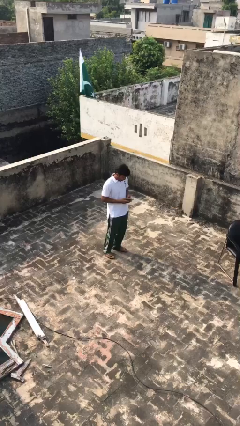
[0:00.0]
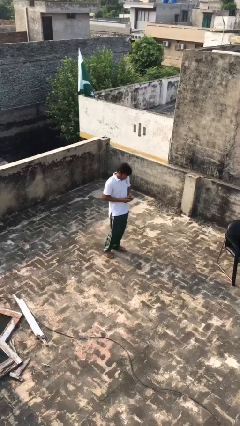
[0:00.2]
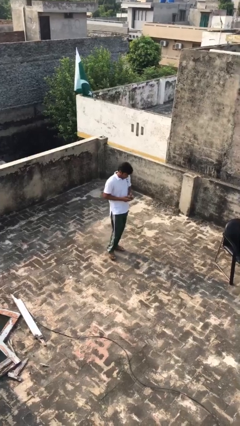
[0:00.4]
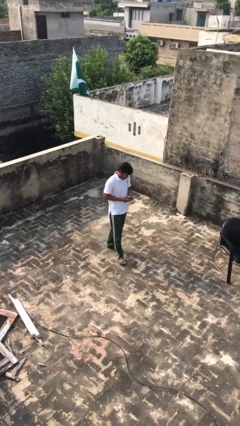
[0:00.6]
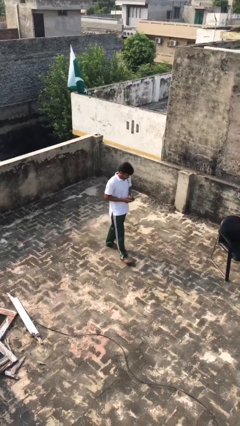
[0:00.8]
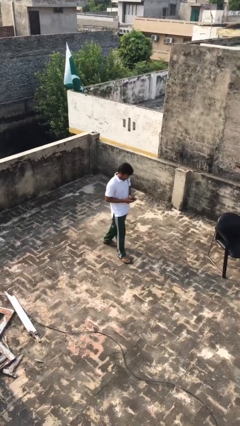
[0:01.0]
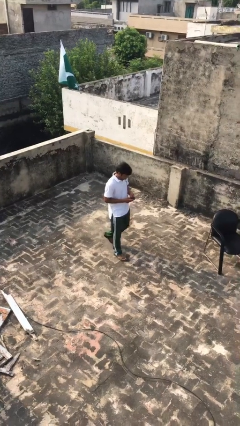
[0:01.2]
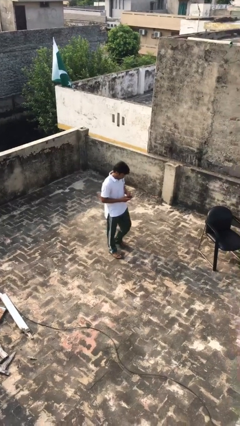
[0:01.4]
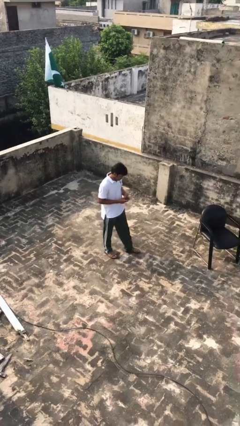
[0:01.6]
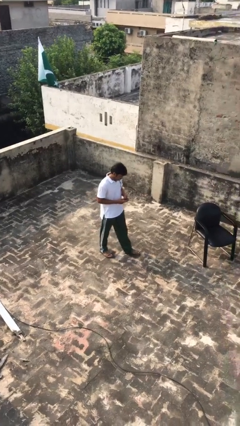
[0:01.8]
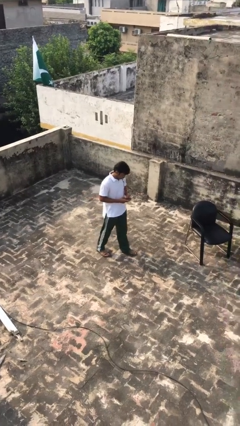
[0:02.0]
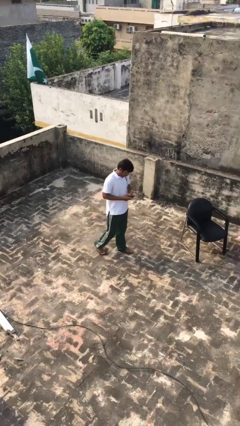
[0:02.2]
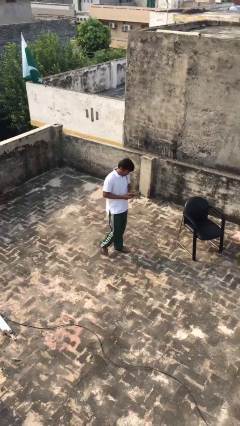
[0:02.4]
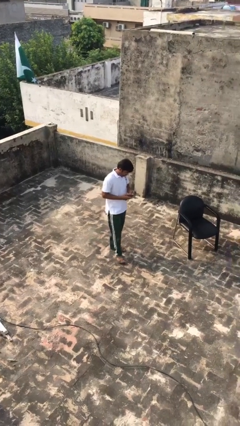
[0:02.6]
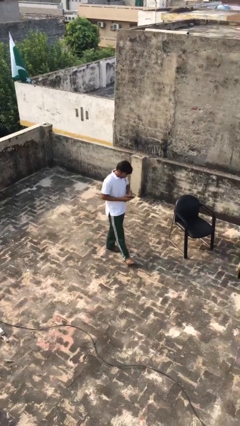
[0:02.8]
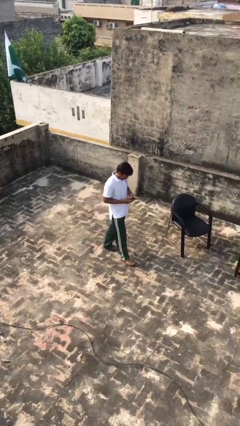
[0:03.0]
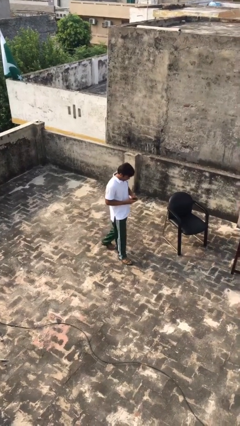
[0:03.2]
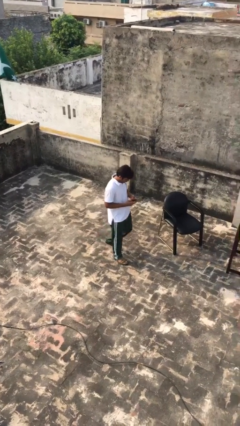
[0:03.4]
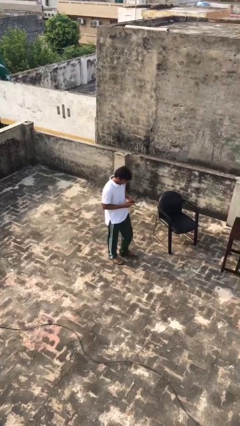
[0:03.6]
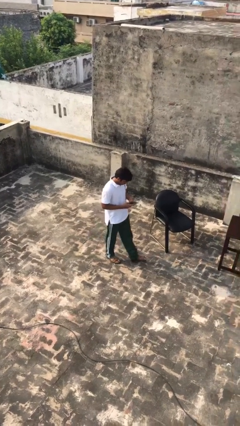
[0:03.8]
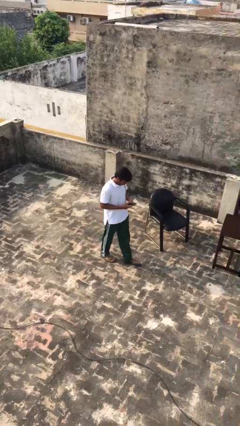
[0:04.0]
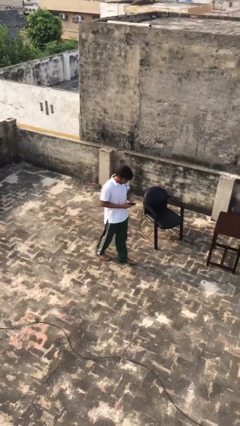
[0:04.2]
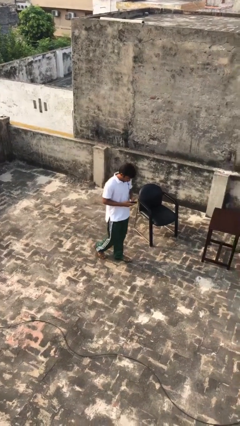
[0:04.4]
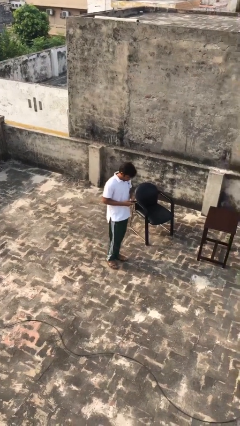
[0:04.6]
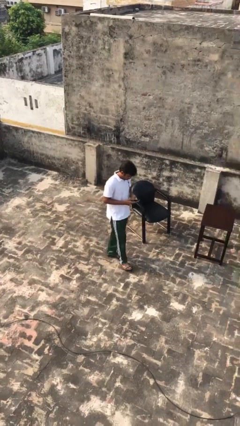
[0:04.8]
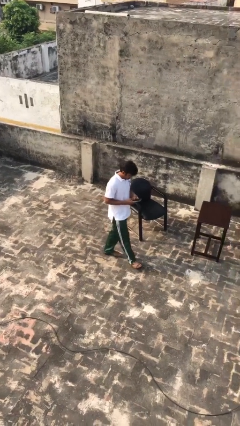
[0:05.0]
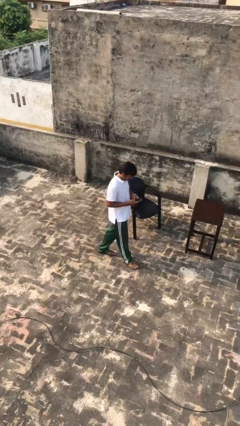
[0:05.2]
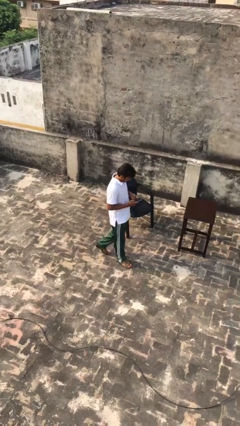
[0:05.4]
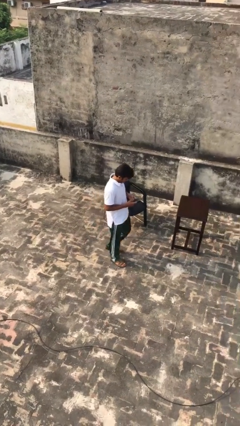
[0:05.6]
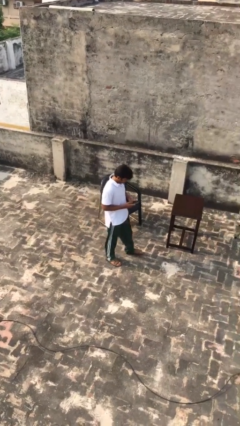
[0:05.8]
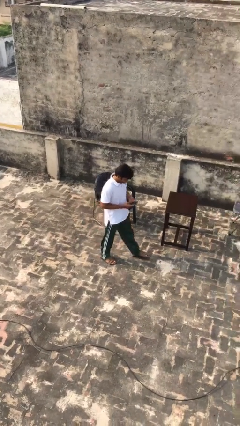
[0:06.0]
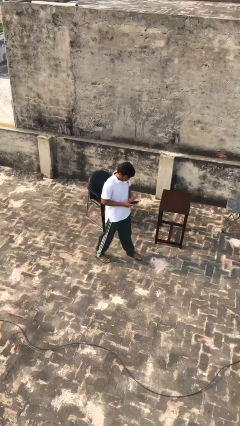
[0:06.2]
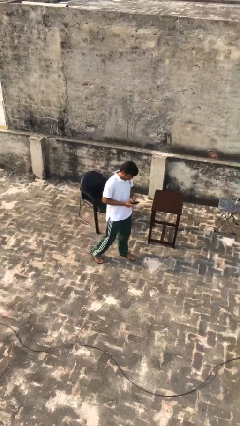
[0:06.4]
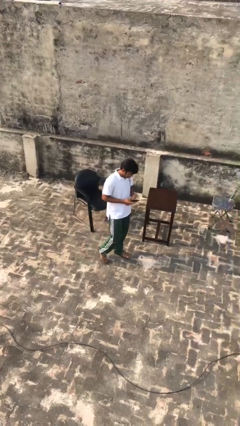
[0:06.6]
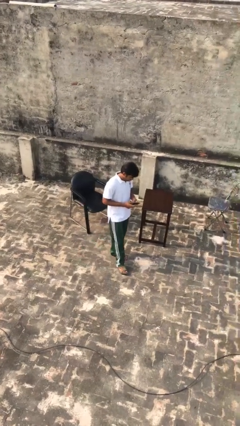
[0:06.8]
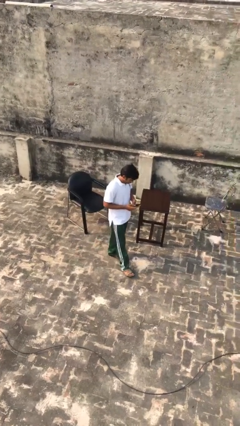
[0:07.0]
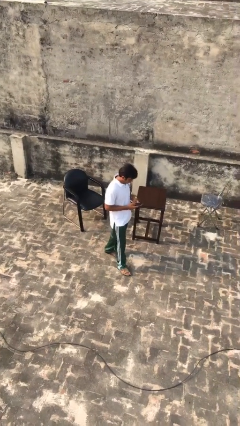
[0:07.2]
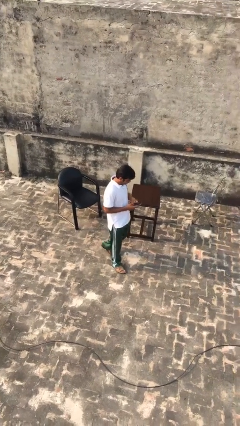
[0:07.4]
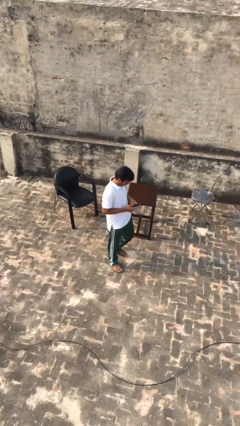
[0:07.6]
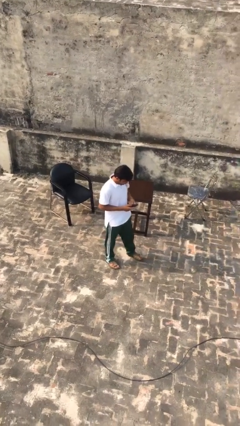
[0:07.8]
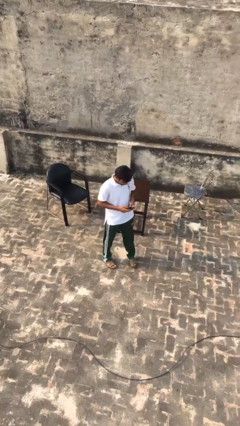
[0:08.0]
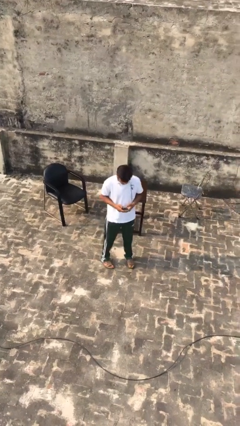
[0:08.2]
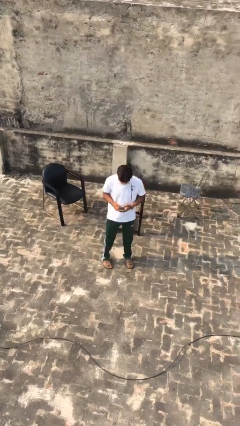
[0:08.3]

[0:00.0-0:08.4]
person texts on phone

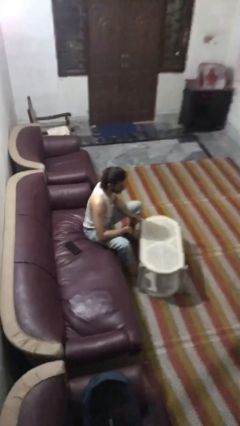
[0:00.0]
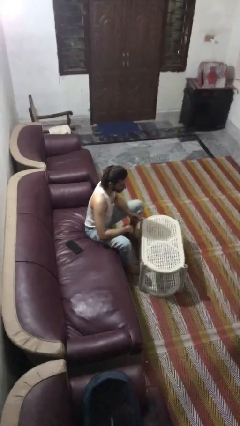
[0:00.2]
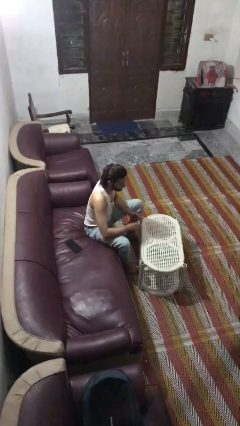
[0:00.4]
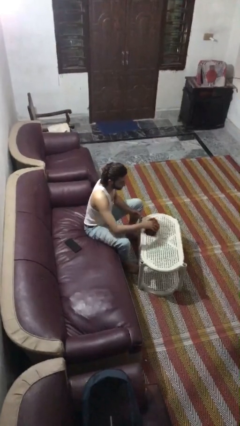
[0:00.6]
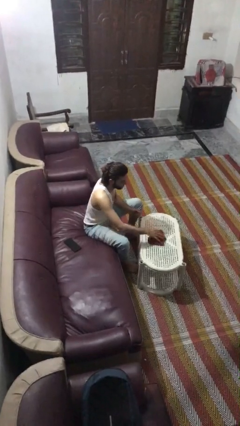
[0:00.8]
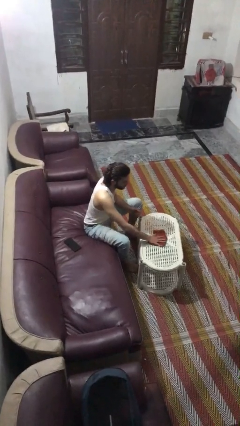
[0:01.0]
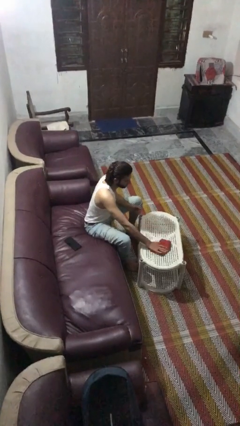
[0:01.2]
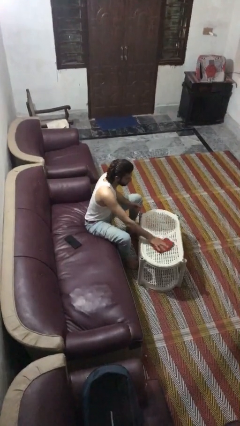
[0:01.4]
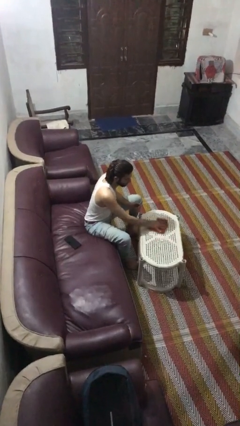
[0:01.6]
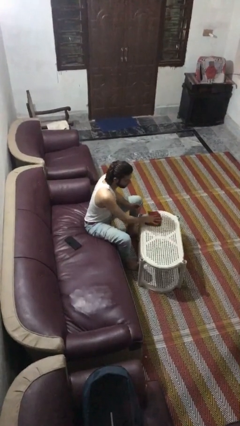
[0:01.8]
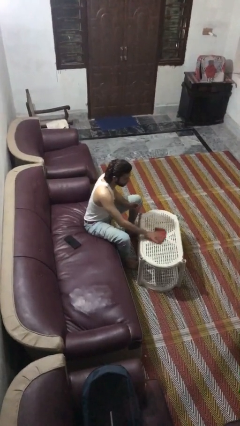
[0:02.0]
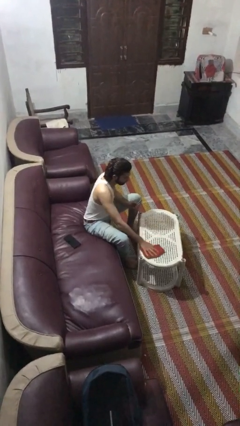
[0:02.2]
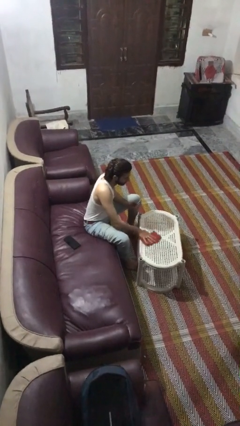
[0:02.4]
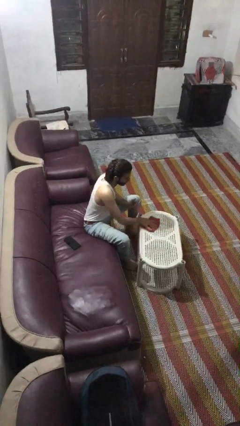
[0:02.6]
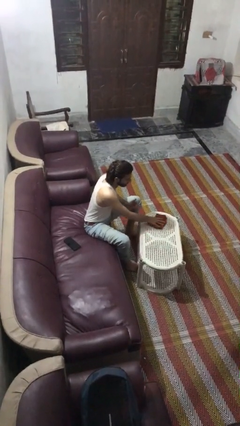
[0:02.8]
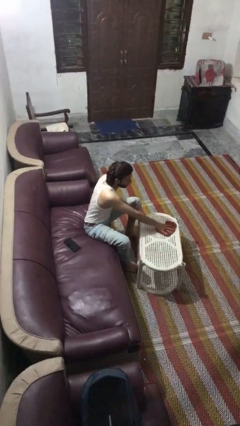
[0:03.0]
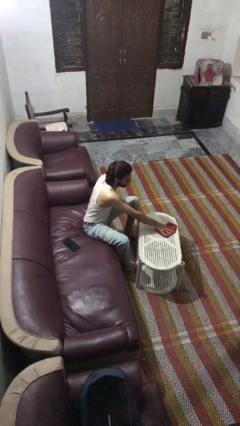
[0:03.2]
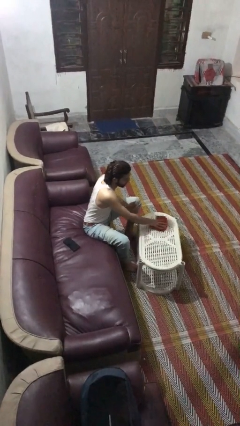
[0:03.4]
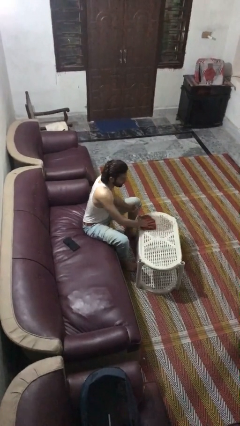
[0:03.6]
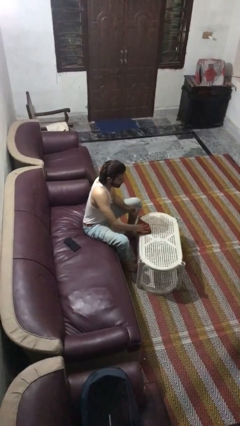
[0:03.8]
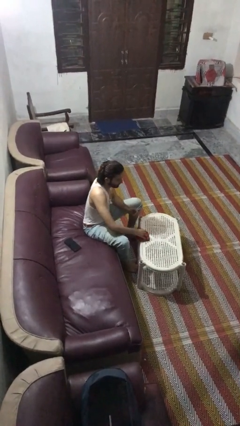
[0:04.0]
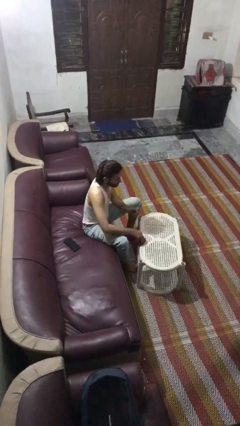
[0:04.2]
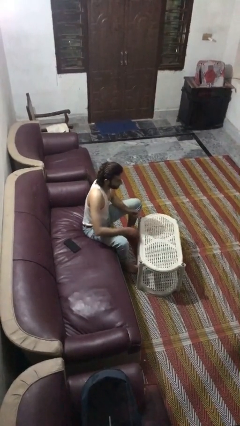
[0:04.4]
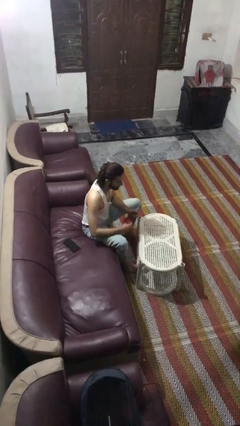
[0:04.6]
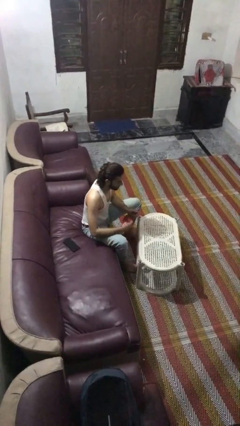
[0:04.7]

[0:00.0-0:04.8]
person cleans table with rag

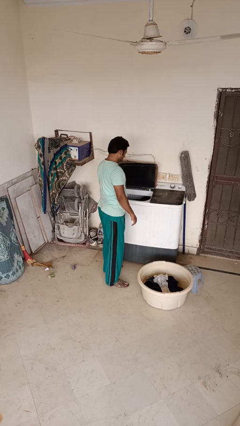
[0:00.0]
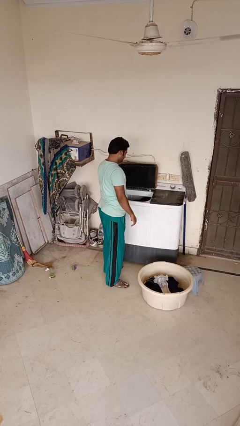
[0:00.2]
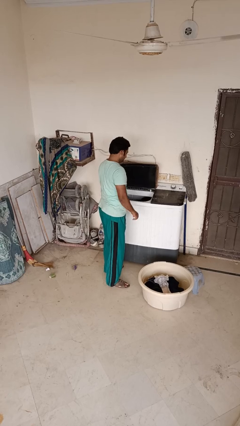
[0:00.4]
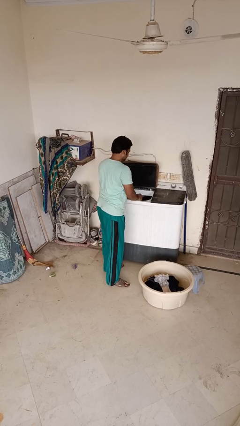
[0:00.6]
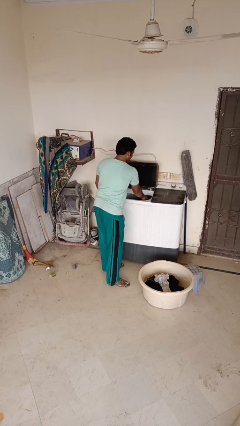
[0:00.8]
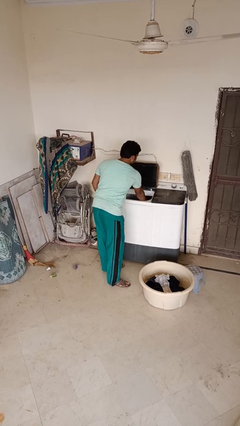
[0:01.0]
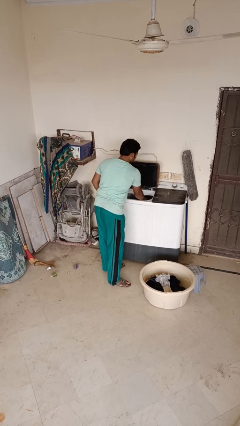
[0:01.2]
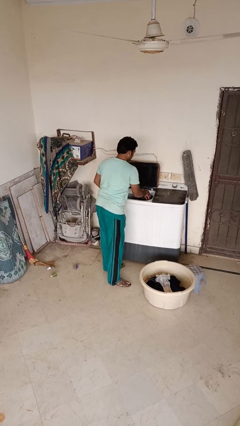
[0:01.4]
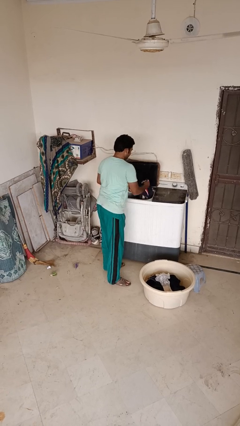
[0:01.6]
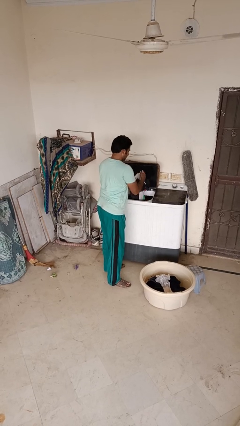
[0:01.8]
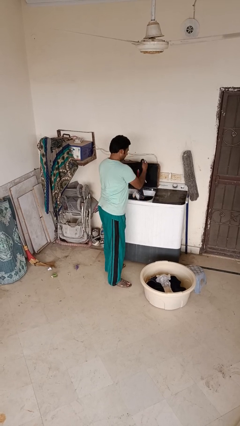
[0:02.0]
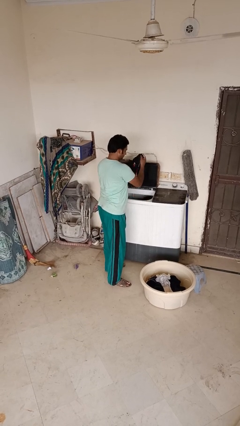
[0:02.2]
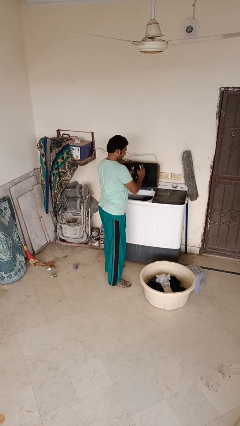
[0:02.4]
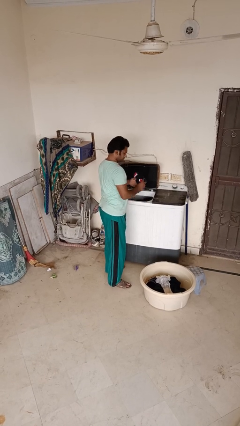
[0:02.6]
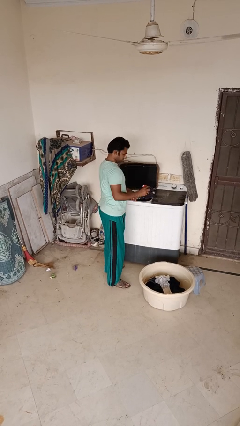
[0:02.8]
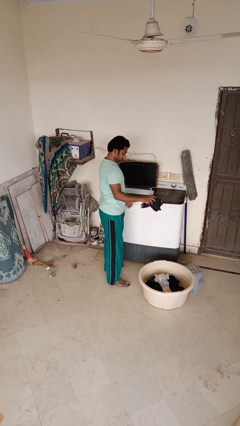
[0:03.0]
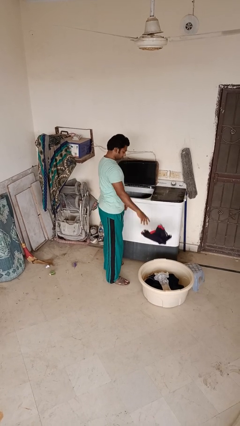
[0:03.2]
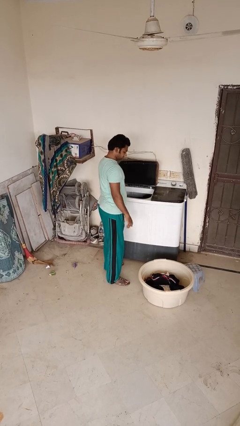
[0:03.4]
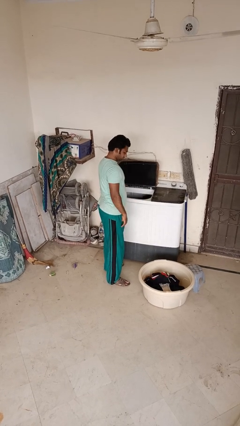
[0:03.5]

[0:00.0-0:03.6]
person loads clotheswasher

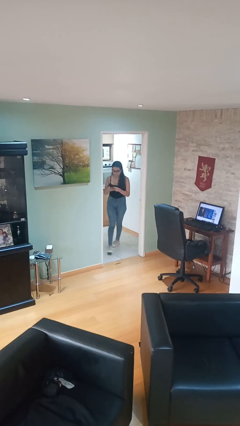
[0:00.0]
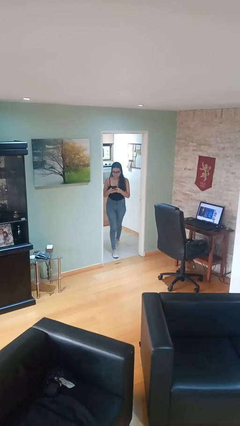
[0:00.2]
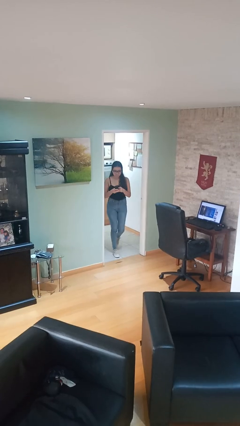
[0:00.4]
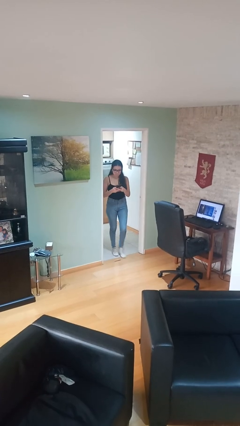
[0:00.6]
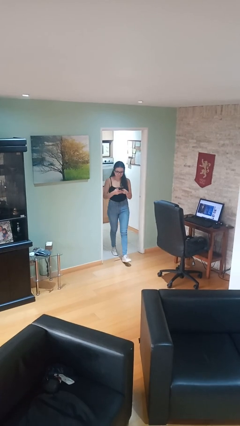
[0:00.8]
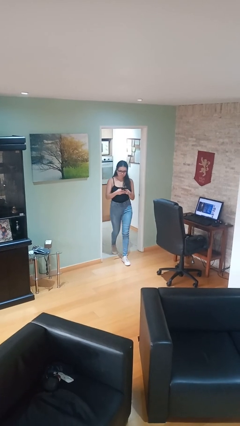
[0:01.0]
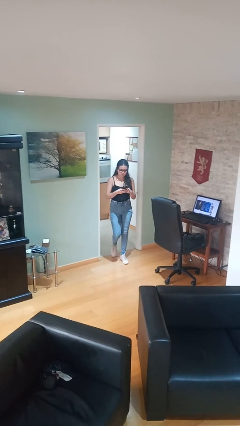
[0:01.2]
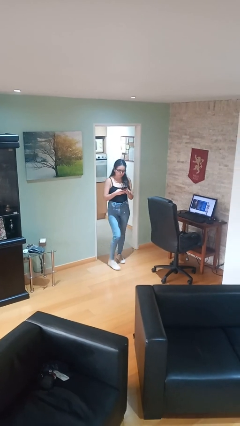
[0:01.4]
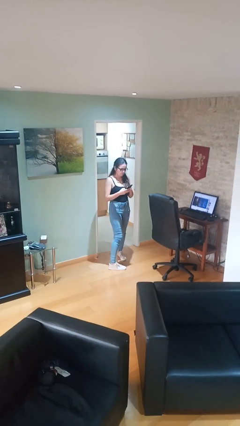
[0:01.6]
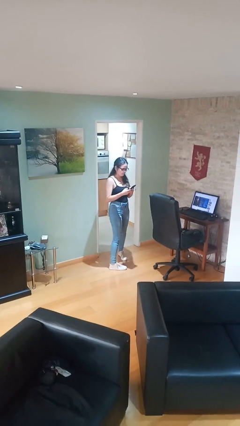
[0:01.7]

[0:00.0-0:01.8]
person enters scene through structure
